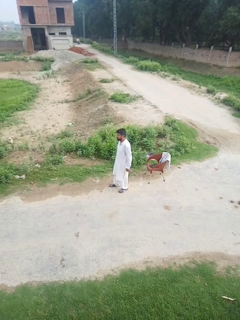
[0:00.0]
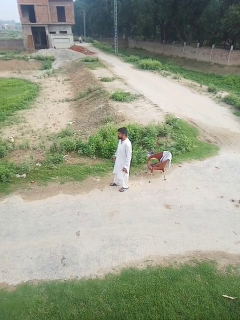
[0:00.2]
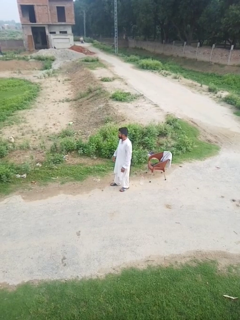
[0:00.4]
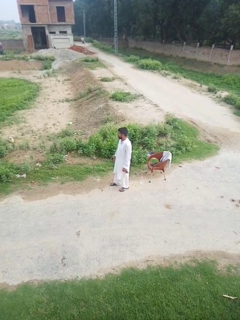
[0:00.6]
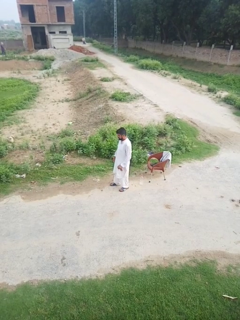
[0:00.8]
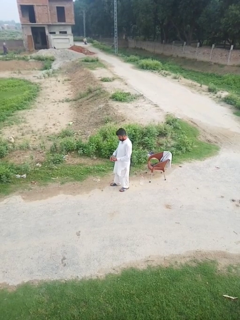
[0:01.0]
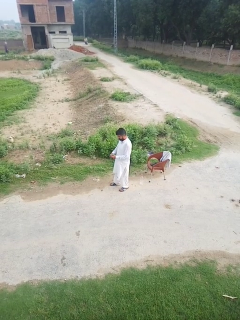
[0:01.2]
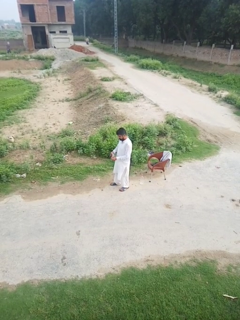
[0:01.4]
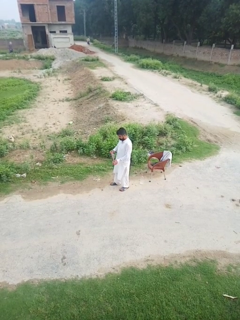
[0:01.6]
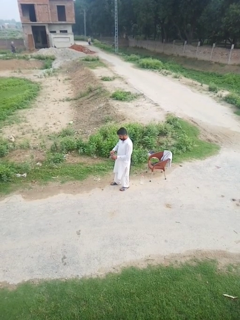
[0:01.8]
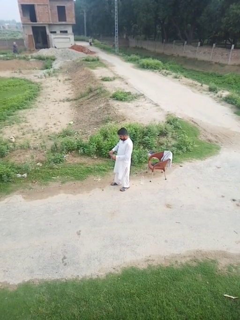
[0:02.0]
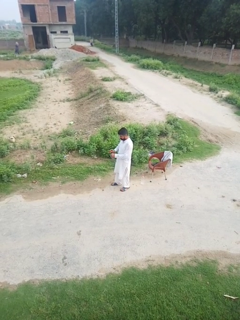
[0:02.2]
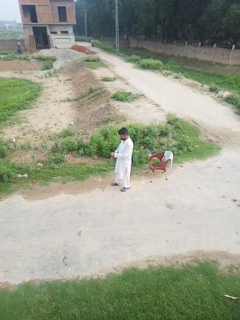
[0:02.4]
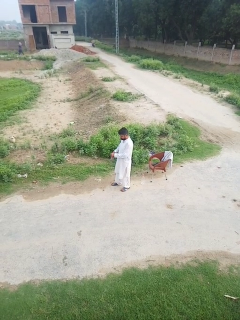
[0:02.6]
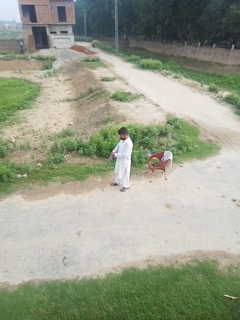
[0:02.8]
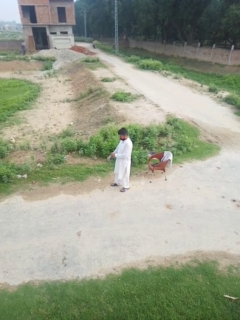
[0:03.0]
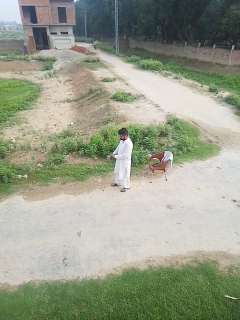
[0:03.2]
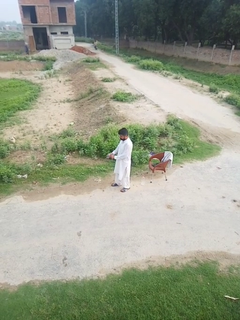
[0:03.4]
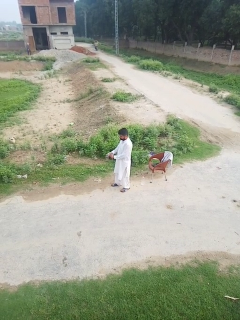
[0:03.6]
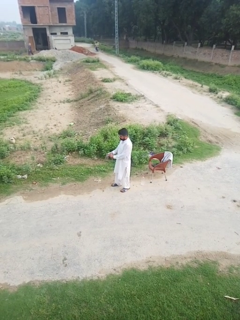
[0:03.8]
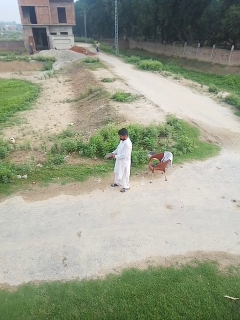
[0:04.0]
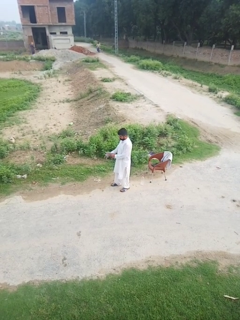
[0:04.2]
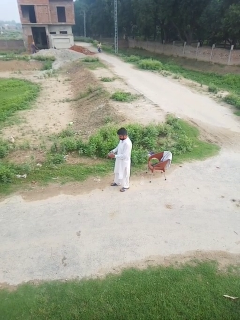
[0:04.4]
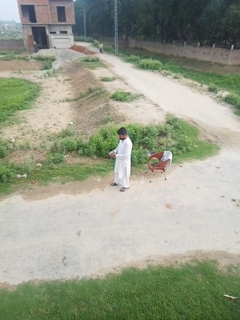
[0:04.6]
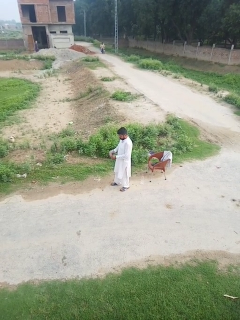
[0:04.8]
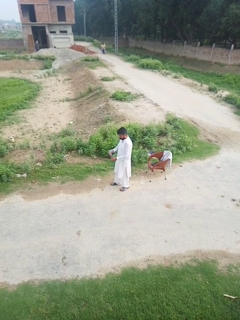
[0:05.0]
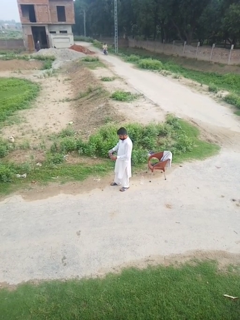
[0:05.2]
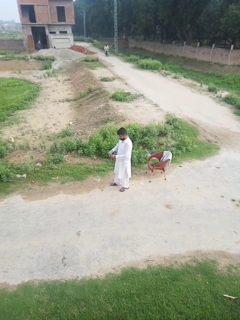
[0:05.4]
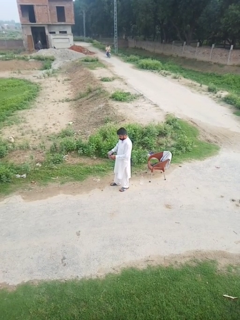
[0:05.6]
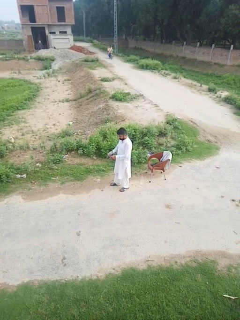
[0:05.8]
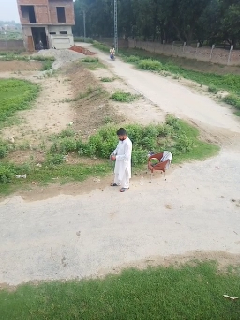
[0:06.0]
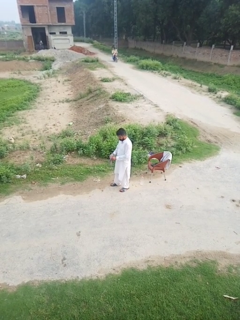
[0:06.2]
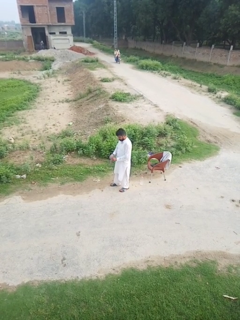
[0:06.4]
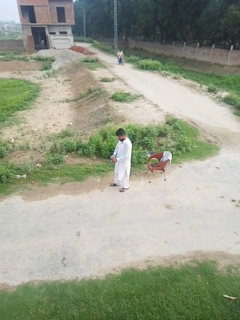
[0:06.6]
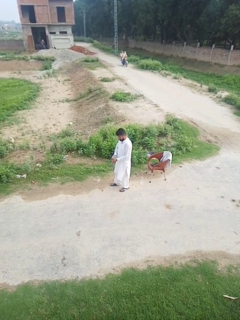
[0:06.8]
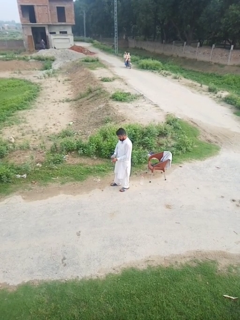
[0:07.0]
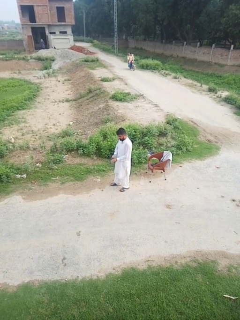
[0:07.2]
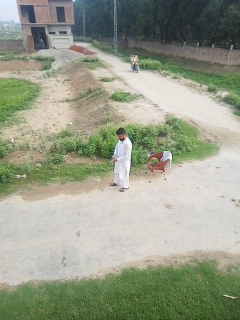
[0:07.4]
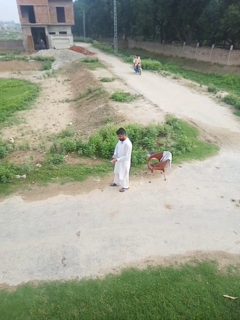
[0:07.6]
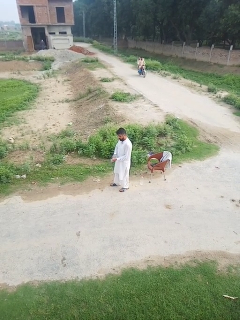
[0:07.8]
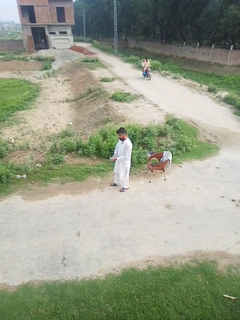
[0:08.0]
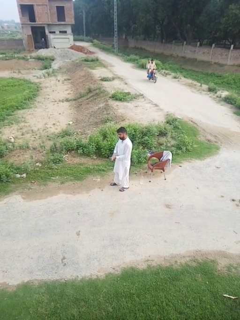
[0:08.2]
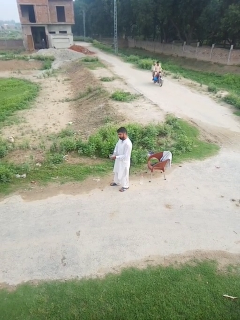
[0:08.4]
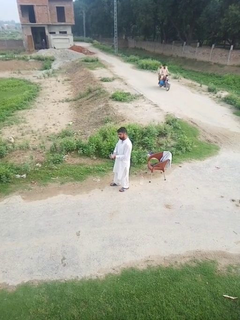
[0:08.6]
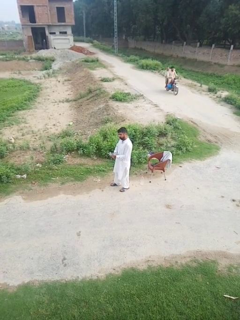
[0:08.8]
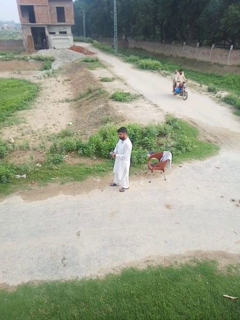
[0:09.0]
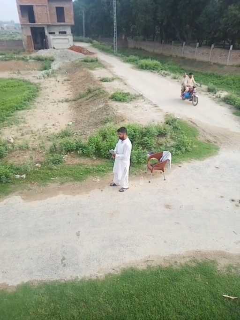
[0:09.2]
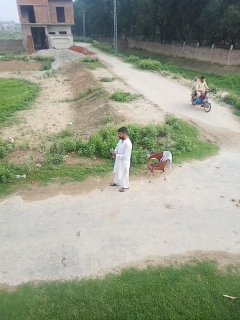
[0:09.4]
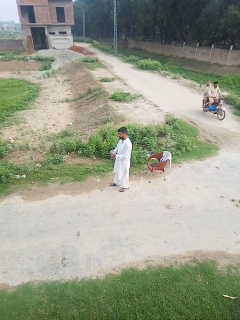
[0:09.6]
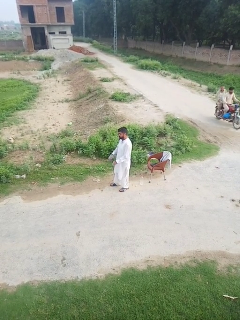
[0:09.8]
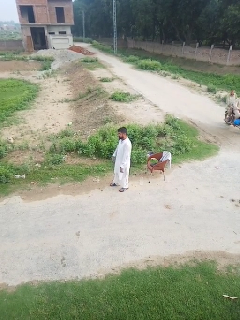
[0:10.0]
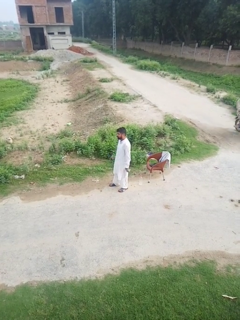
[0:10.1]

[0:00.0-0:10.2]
person puts on gloves

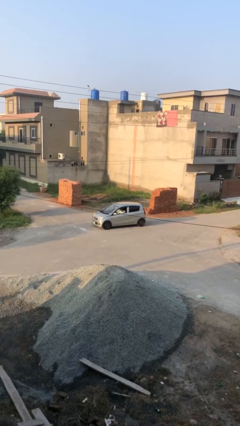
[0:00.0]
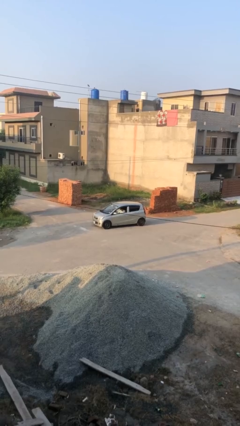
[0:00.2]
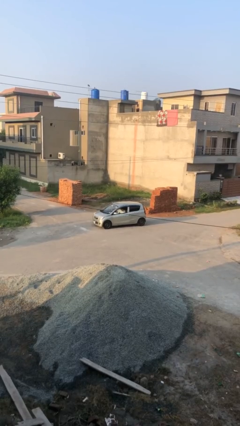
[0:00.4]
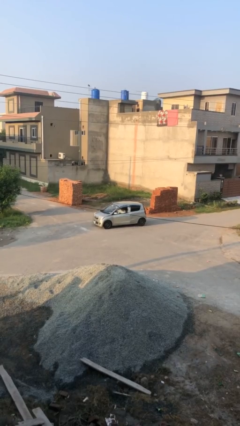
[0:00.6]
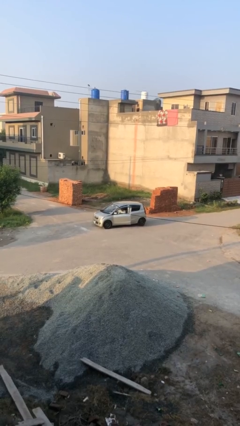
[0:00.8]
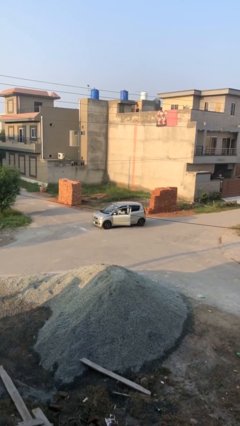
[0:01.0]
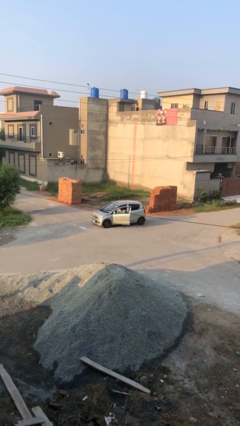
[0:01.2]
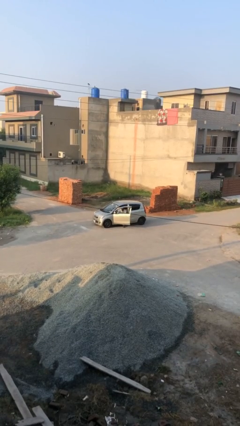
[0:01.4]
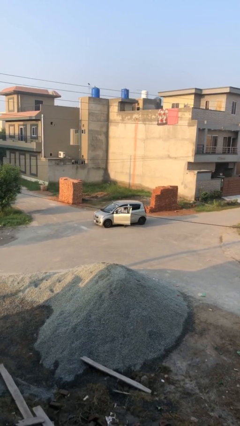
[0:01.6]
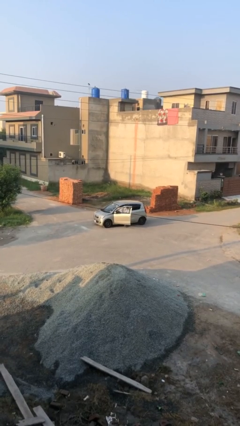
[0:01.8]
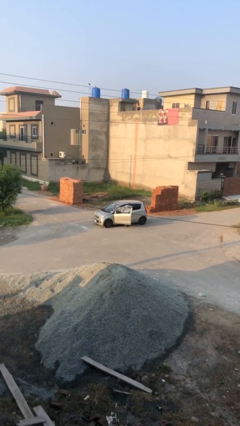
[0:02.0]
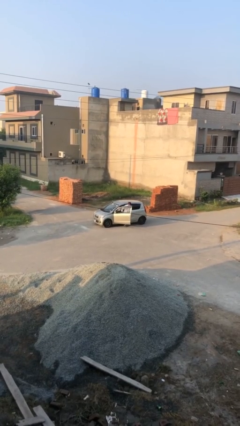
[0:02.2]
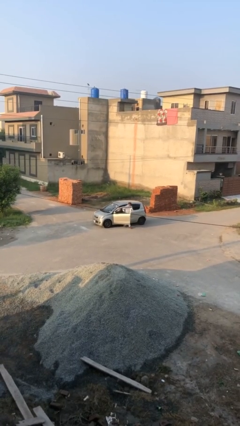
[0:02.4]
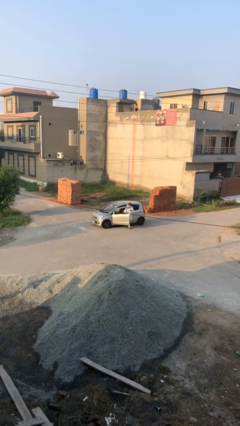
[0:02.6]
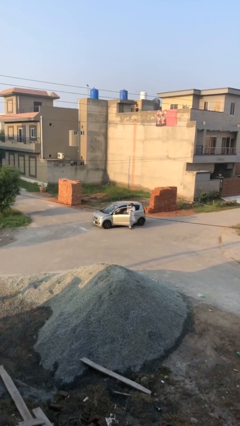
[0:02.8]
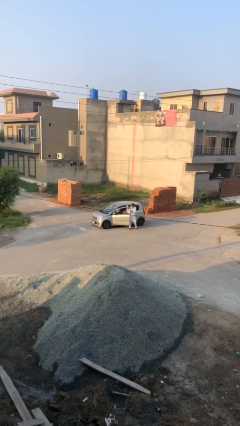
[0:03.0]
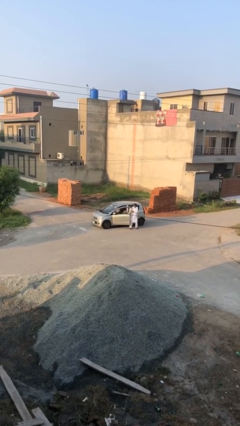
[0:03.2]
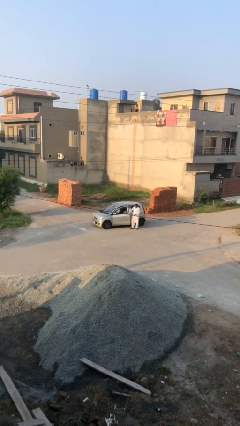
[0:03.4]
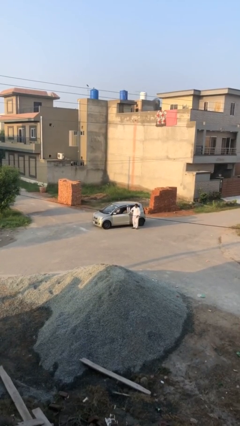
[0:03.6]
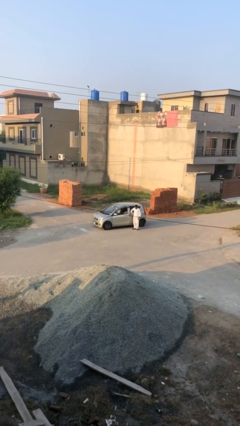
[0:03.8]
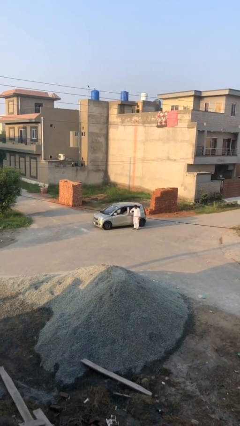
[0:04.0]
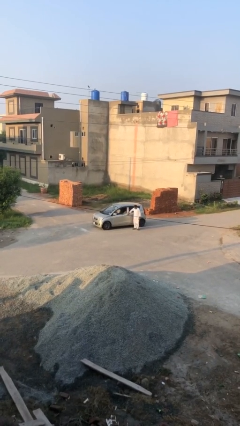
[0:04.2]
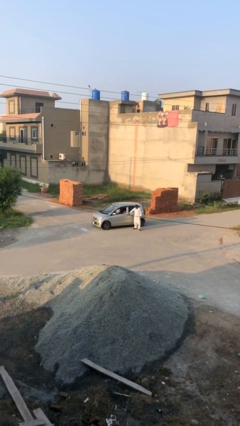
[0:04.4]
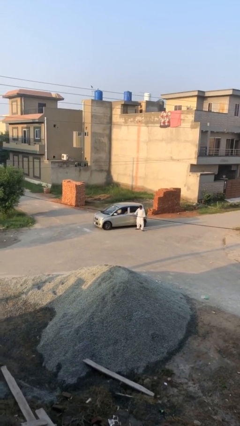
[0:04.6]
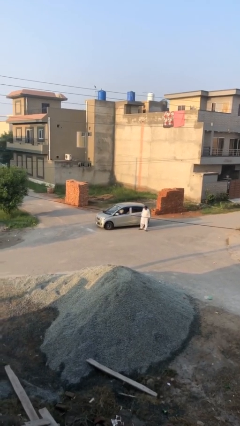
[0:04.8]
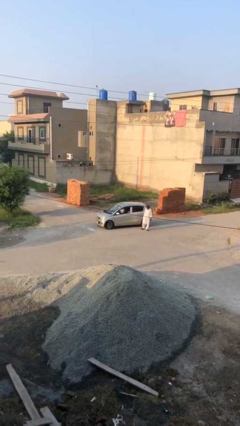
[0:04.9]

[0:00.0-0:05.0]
car drops off person

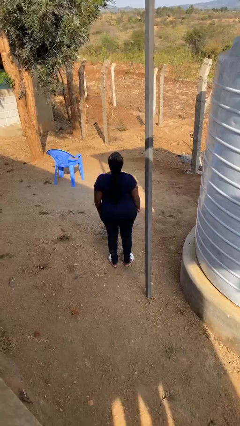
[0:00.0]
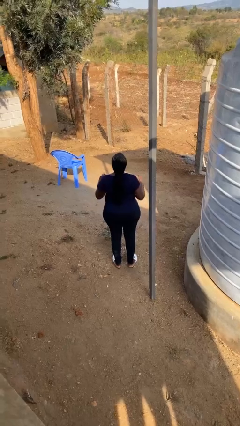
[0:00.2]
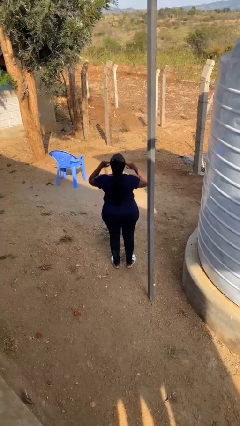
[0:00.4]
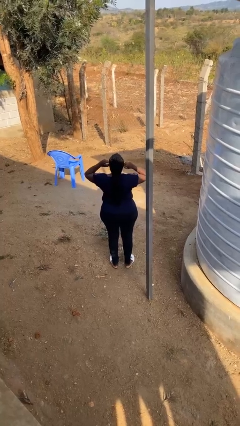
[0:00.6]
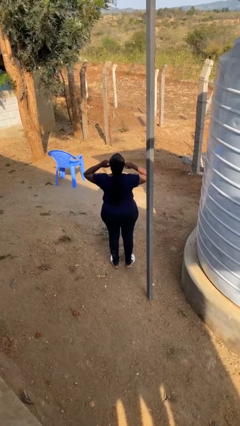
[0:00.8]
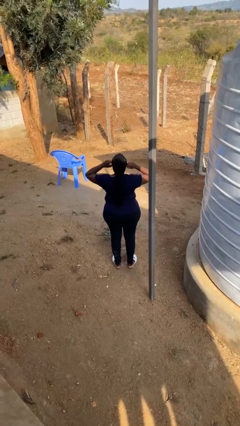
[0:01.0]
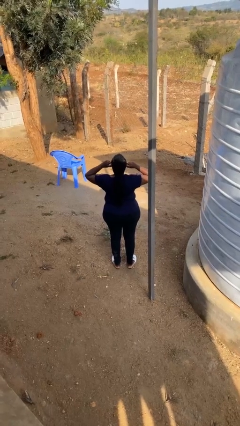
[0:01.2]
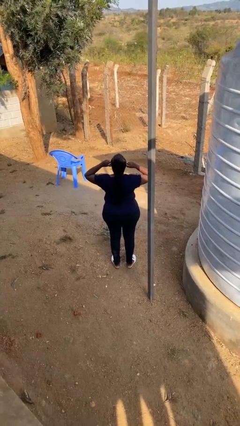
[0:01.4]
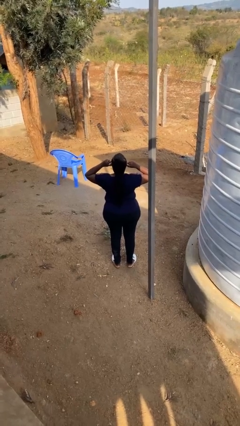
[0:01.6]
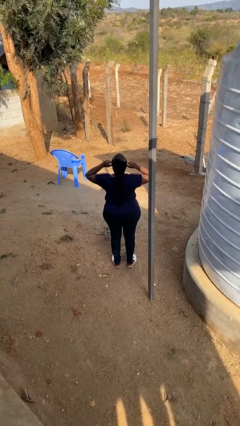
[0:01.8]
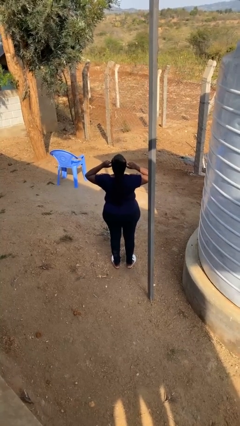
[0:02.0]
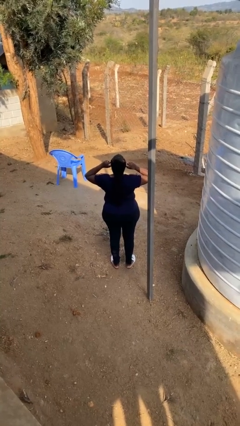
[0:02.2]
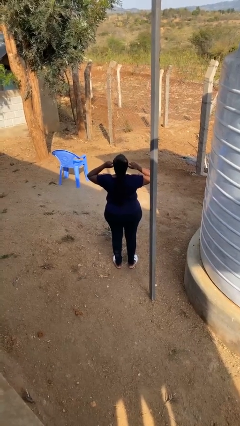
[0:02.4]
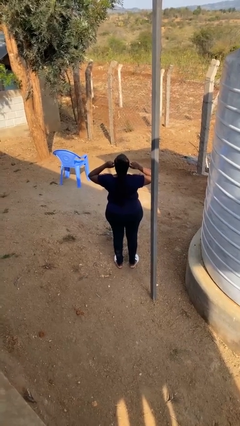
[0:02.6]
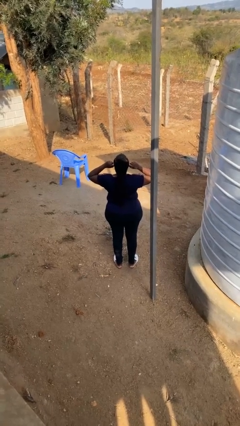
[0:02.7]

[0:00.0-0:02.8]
person puts fingers in ear

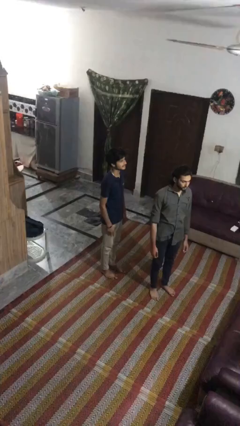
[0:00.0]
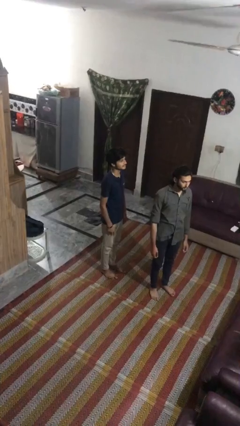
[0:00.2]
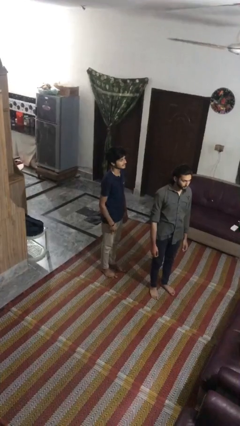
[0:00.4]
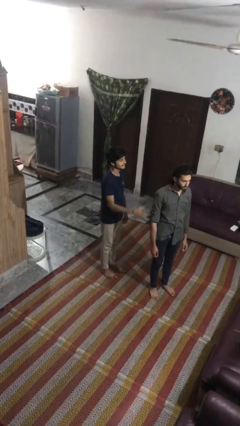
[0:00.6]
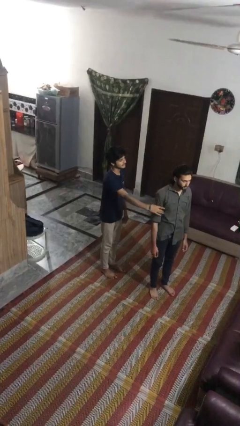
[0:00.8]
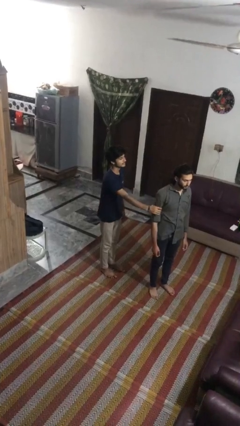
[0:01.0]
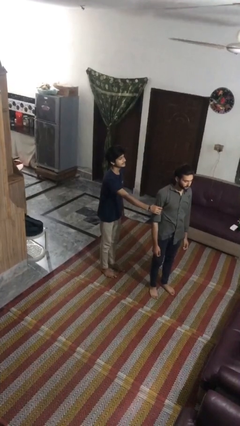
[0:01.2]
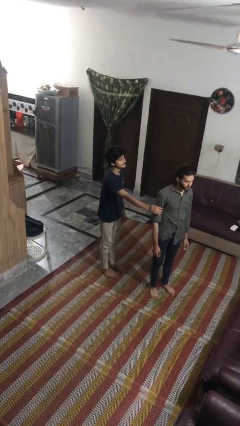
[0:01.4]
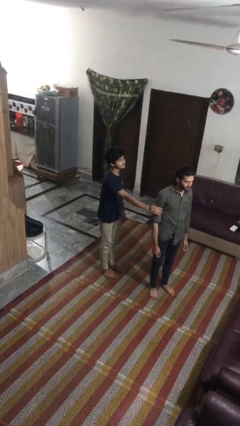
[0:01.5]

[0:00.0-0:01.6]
person grabs person by shoulder

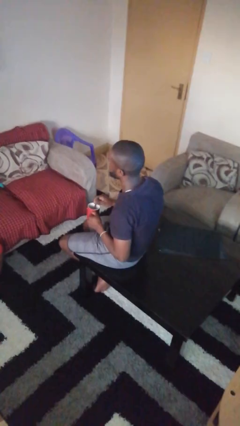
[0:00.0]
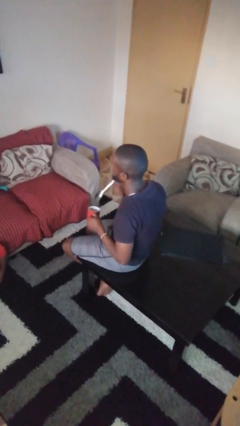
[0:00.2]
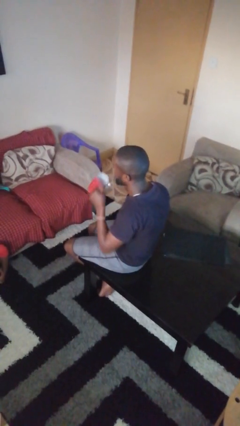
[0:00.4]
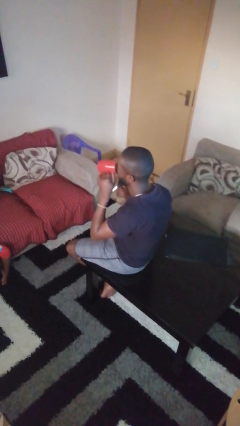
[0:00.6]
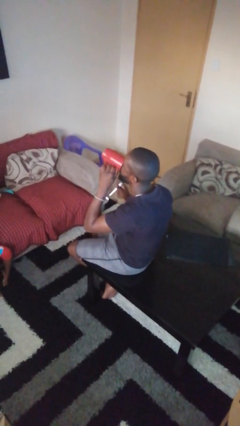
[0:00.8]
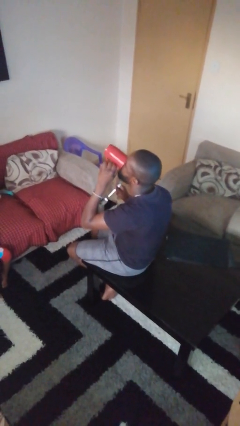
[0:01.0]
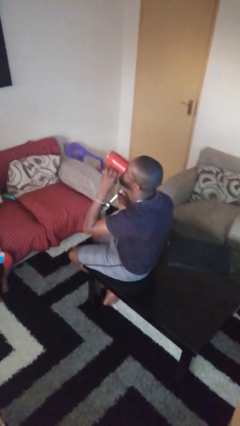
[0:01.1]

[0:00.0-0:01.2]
person drinks from mug
